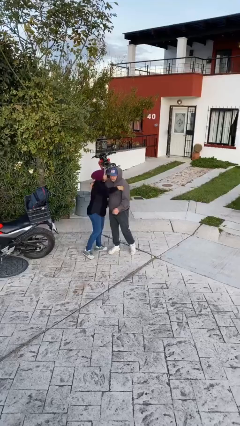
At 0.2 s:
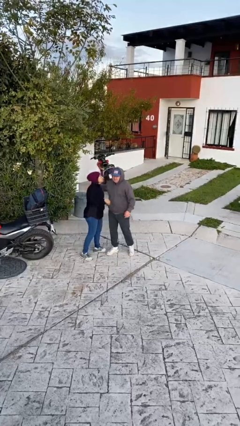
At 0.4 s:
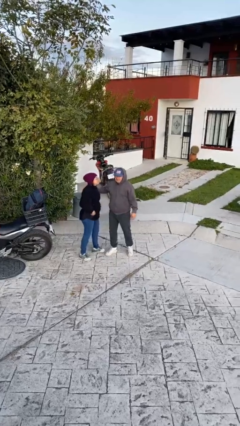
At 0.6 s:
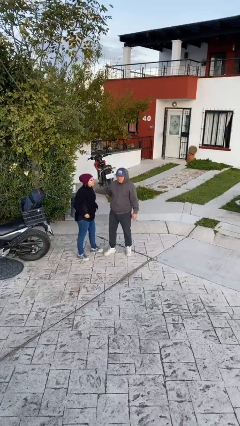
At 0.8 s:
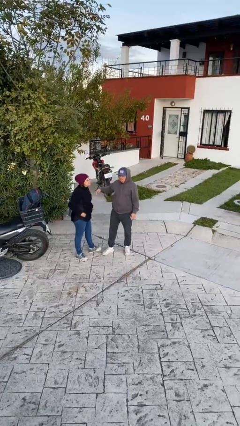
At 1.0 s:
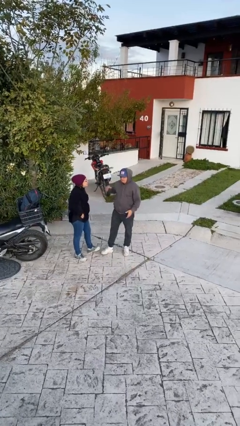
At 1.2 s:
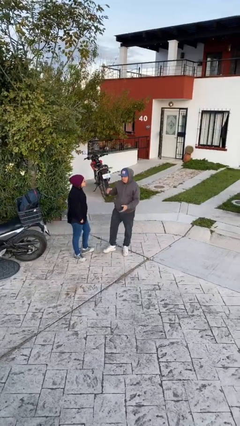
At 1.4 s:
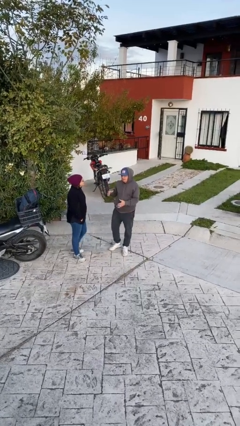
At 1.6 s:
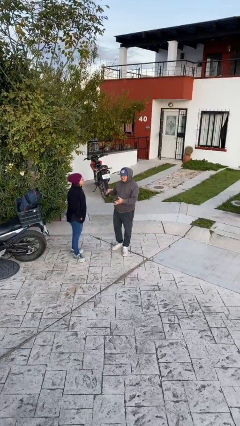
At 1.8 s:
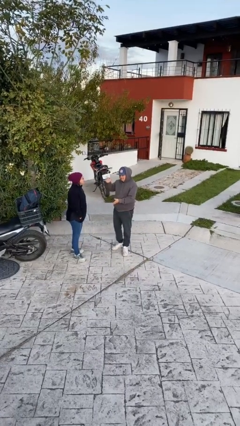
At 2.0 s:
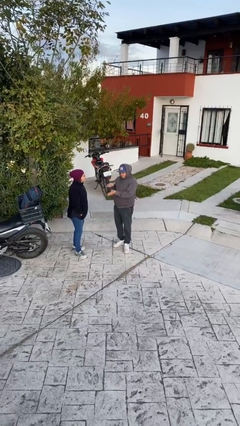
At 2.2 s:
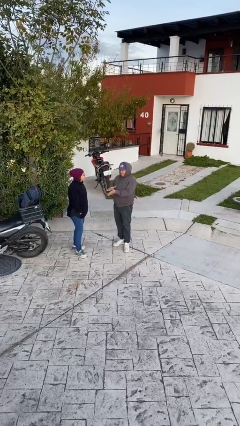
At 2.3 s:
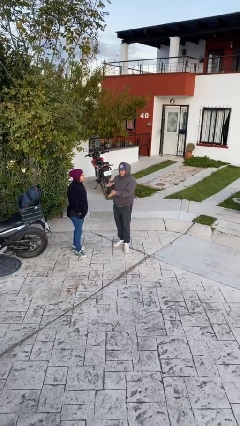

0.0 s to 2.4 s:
person talks to person

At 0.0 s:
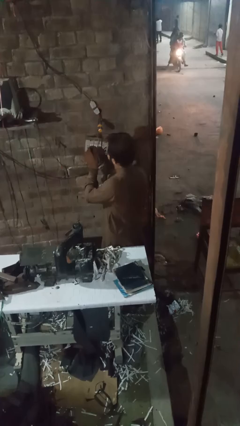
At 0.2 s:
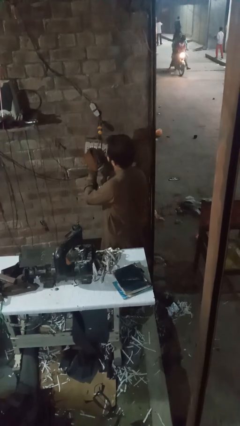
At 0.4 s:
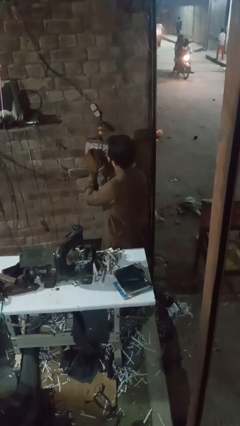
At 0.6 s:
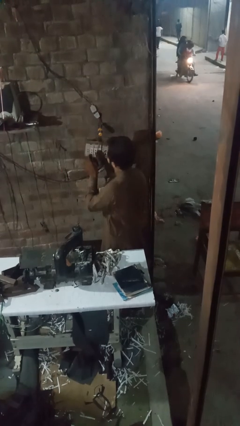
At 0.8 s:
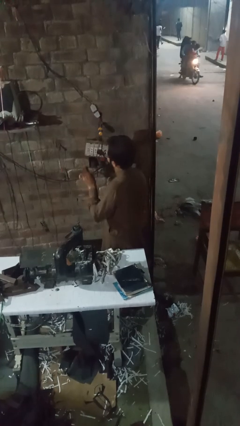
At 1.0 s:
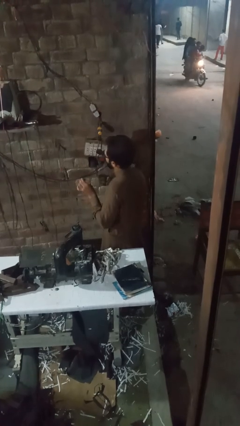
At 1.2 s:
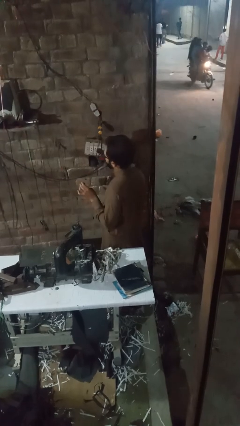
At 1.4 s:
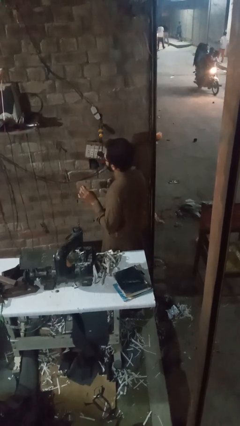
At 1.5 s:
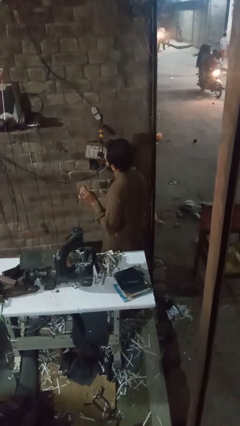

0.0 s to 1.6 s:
person unplugs from electrical socket

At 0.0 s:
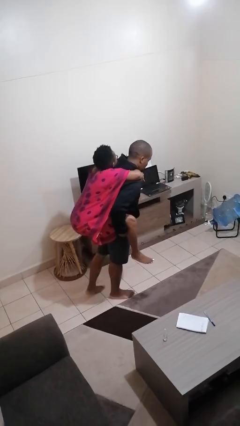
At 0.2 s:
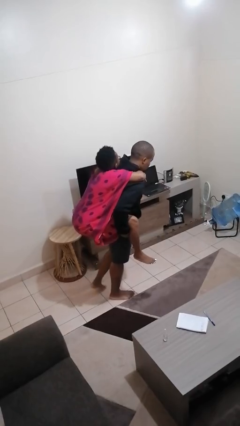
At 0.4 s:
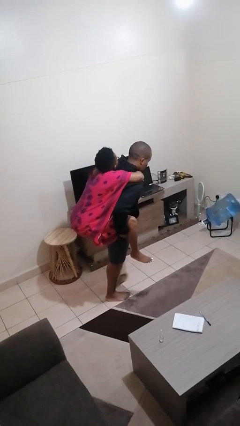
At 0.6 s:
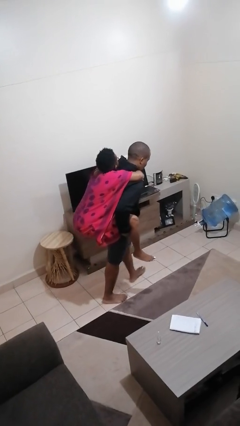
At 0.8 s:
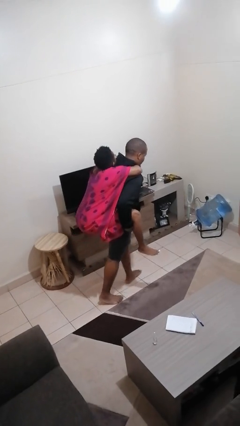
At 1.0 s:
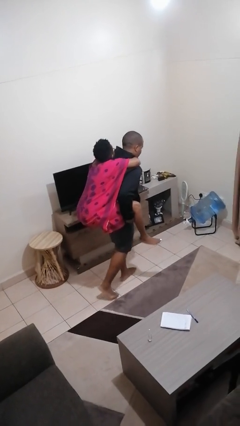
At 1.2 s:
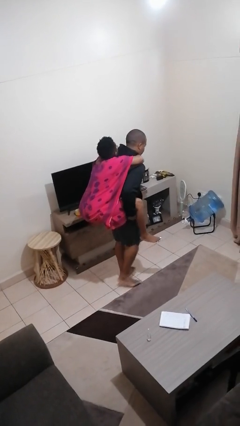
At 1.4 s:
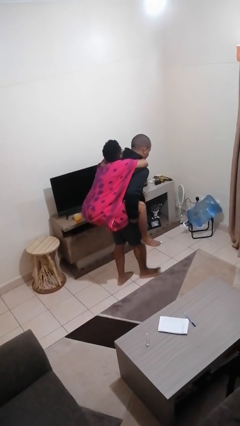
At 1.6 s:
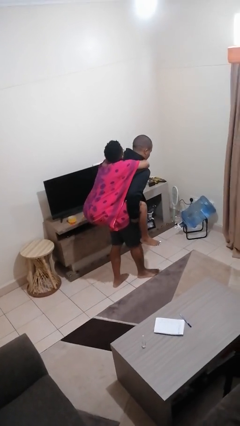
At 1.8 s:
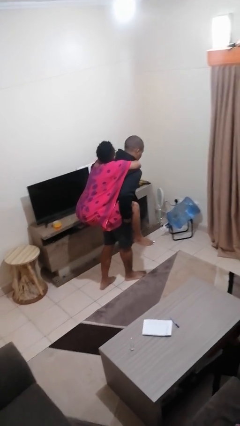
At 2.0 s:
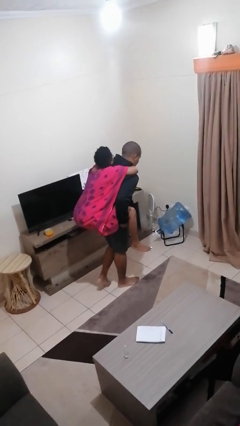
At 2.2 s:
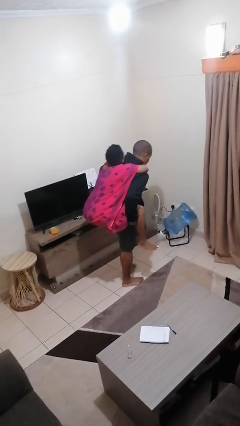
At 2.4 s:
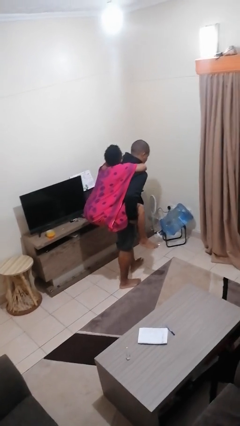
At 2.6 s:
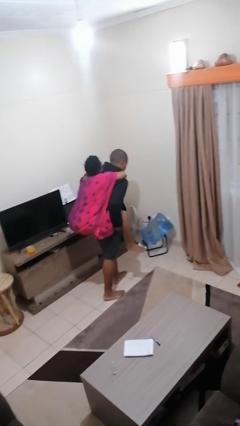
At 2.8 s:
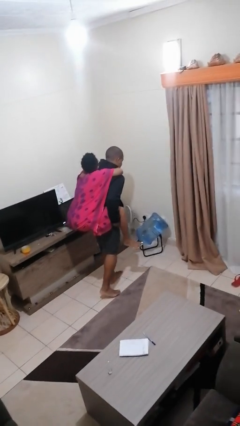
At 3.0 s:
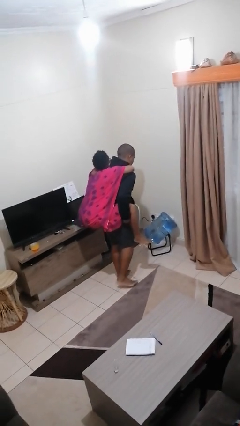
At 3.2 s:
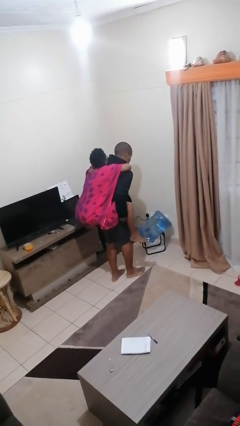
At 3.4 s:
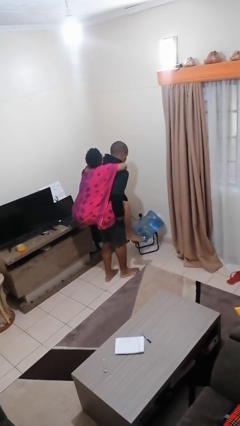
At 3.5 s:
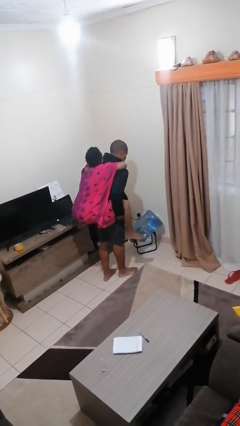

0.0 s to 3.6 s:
person carries person on back

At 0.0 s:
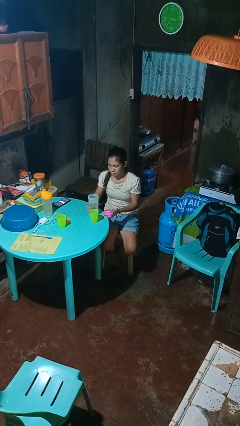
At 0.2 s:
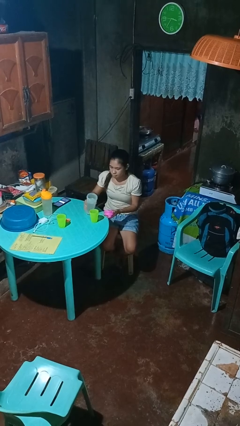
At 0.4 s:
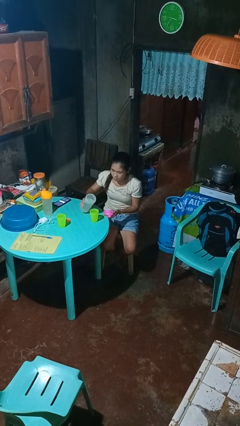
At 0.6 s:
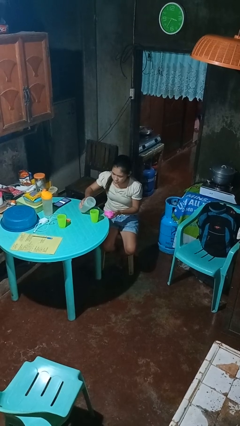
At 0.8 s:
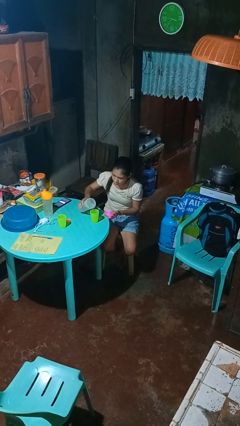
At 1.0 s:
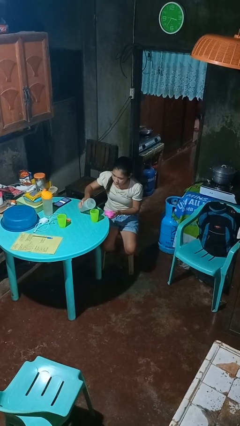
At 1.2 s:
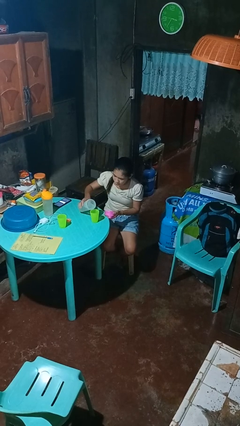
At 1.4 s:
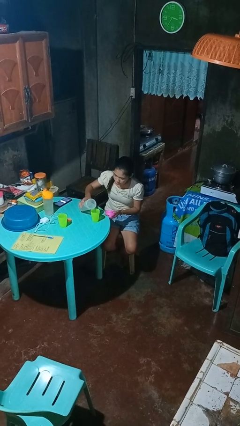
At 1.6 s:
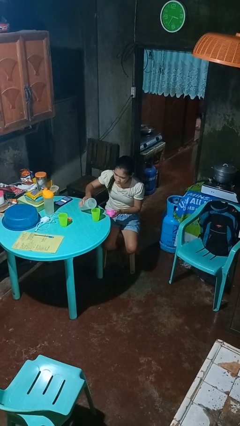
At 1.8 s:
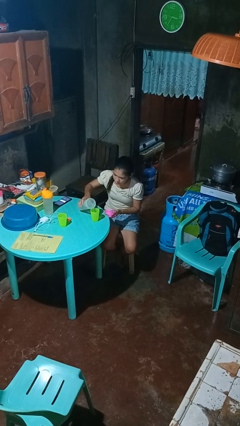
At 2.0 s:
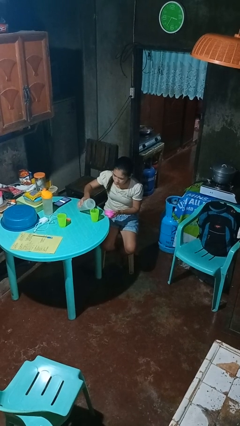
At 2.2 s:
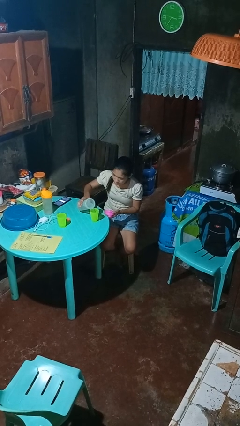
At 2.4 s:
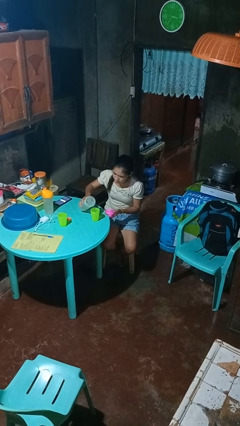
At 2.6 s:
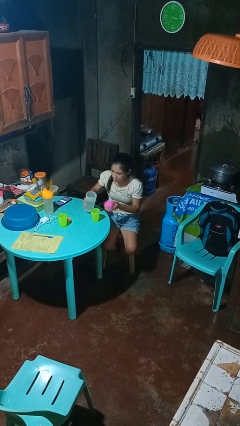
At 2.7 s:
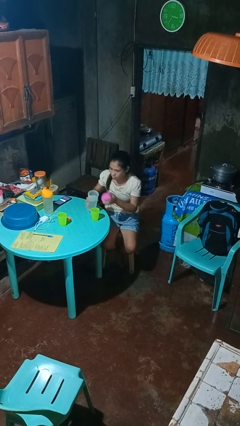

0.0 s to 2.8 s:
person pours liquid into cup

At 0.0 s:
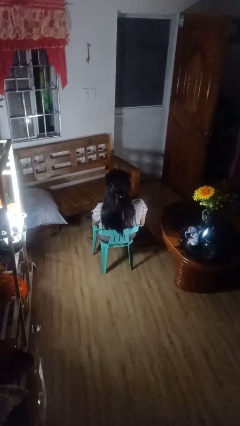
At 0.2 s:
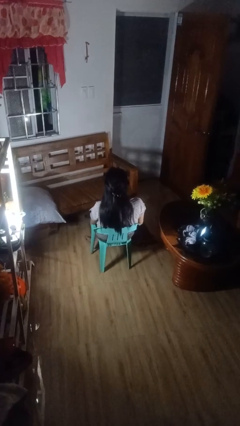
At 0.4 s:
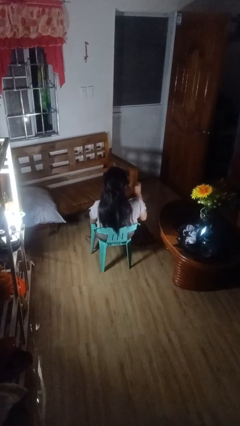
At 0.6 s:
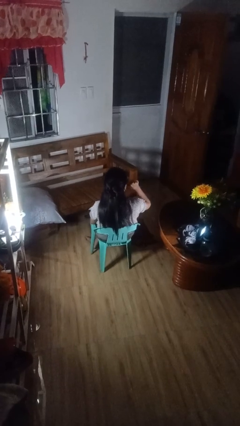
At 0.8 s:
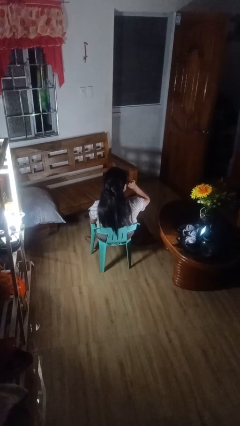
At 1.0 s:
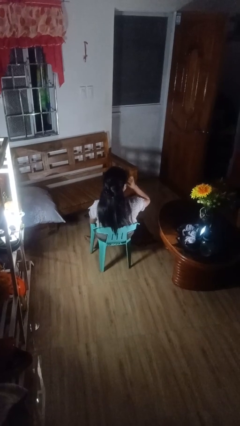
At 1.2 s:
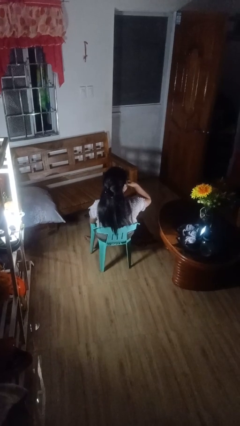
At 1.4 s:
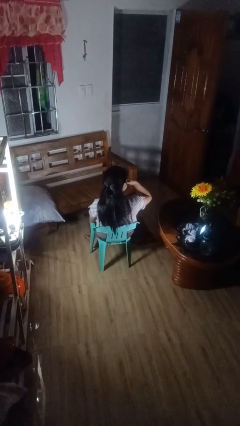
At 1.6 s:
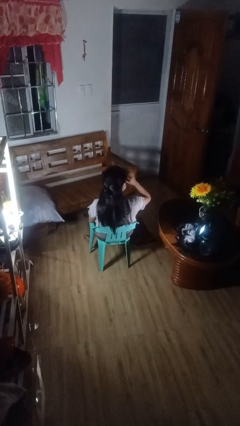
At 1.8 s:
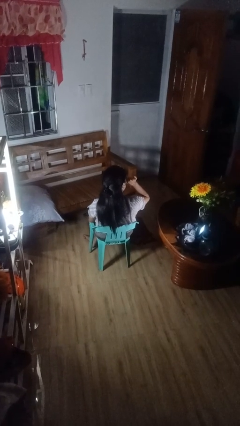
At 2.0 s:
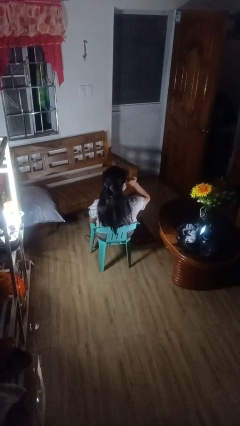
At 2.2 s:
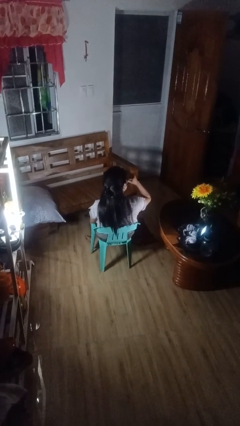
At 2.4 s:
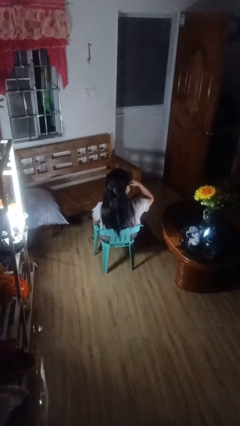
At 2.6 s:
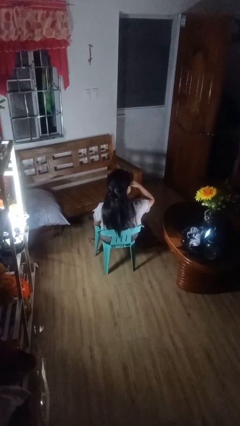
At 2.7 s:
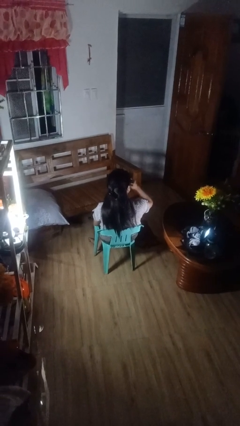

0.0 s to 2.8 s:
person licks fingers

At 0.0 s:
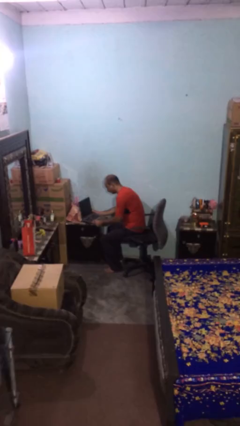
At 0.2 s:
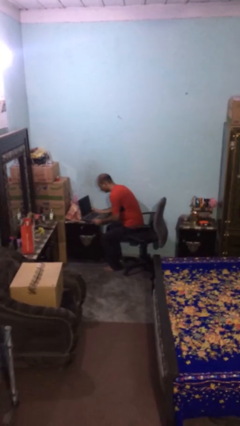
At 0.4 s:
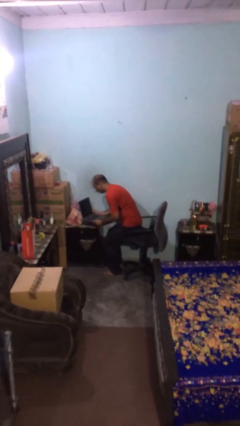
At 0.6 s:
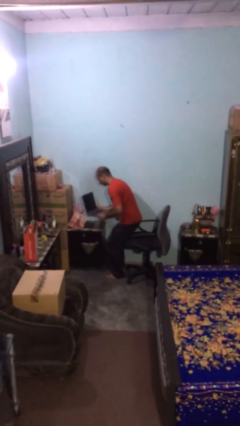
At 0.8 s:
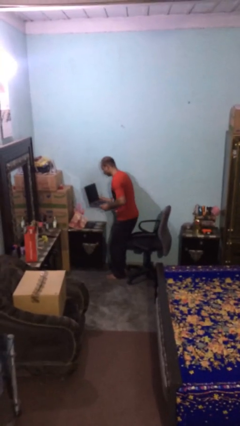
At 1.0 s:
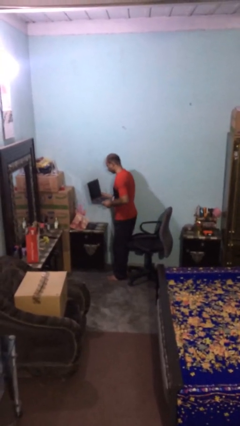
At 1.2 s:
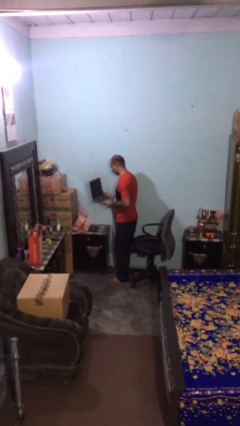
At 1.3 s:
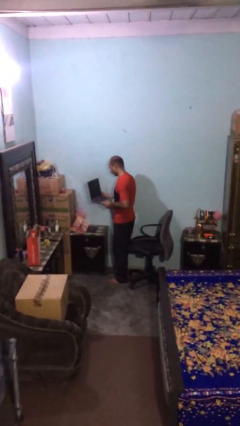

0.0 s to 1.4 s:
person stands up

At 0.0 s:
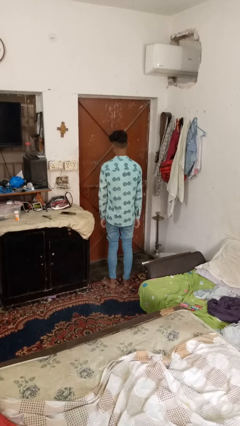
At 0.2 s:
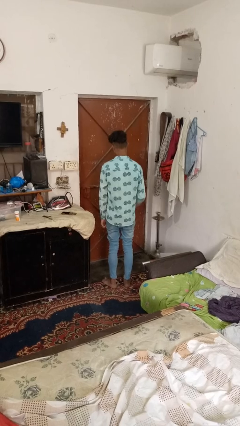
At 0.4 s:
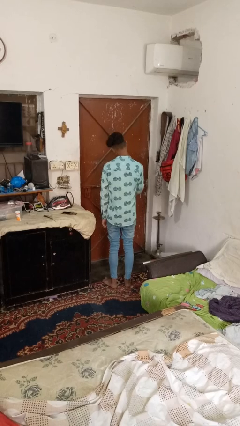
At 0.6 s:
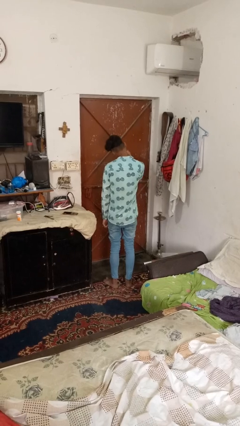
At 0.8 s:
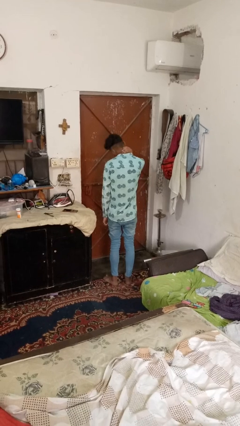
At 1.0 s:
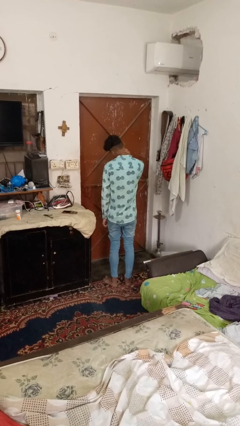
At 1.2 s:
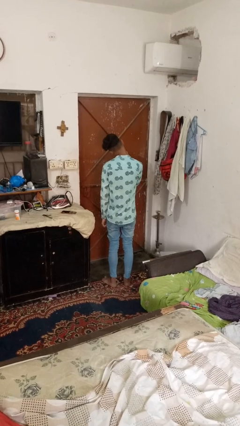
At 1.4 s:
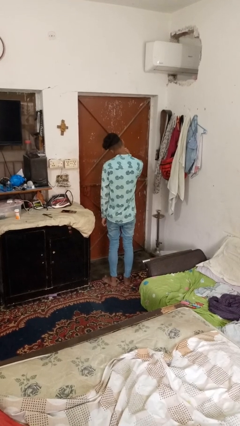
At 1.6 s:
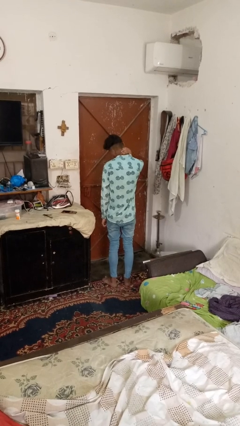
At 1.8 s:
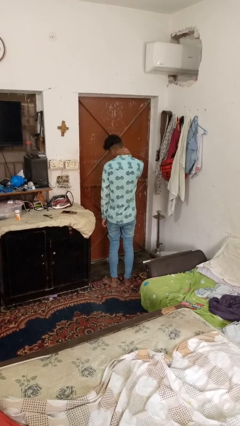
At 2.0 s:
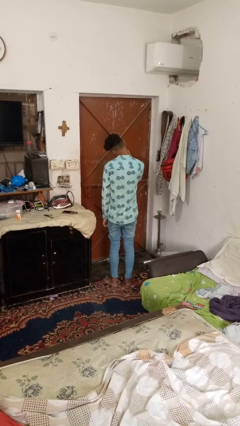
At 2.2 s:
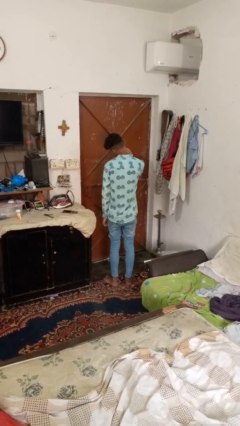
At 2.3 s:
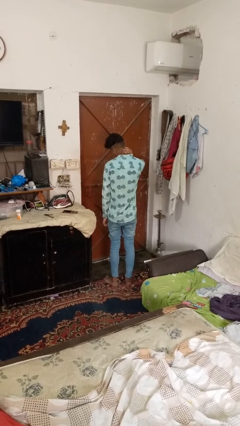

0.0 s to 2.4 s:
person rubs neck

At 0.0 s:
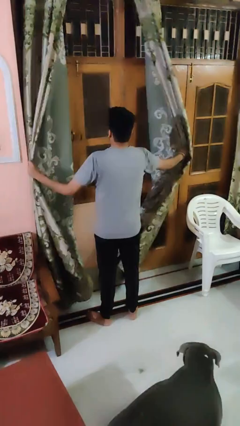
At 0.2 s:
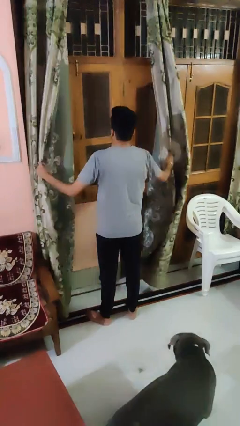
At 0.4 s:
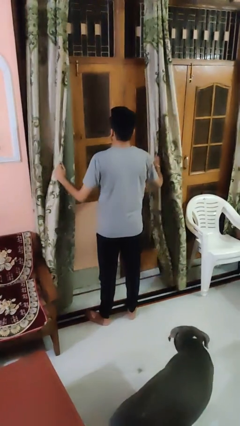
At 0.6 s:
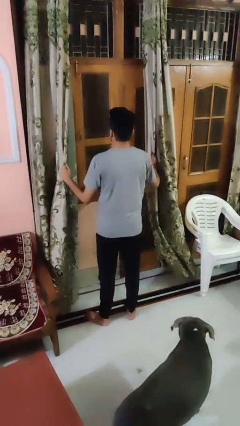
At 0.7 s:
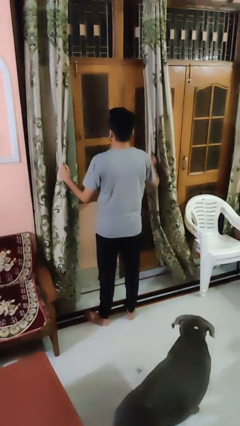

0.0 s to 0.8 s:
person opens curtains
